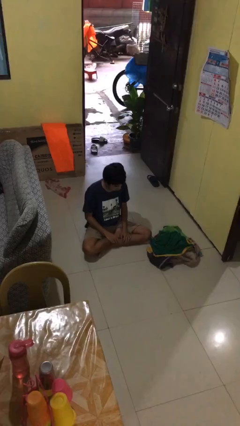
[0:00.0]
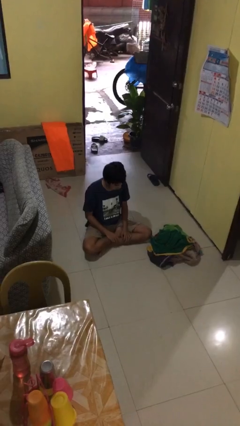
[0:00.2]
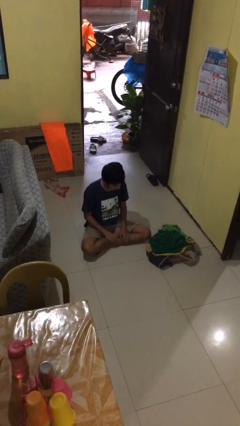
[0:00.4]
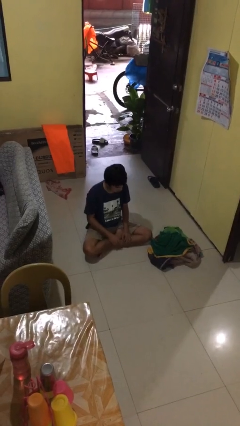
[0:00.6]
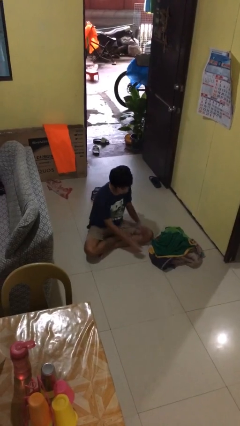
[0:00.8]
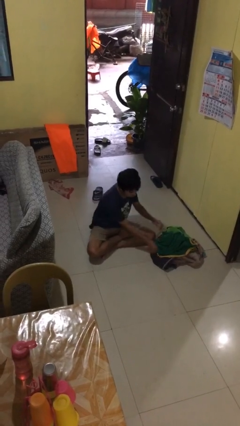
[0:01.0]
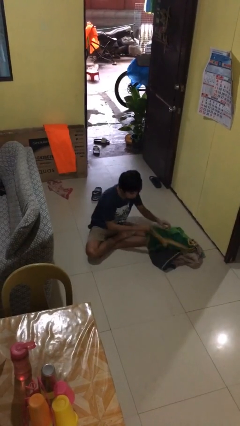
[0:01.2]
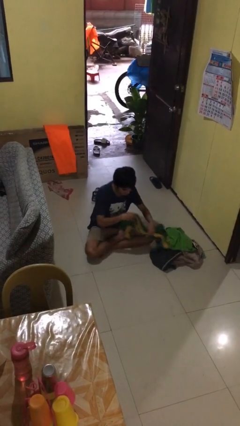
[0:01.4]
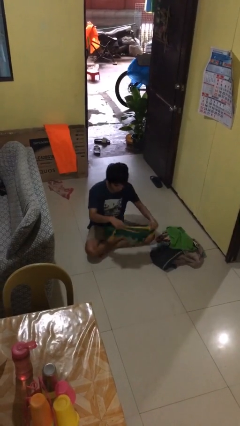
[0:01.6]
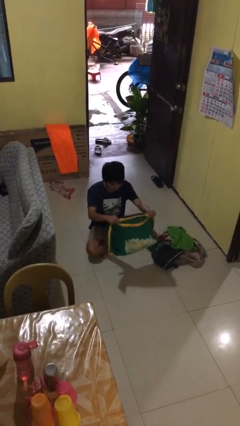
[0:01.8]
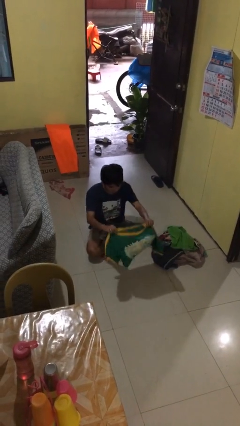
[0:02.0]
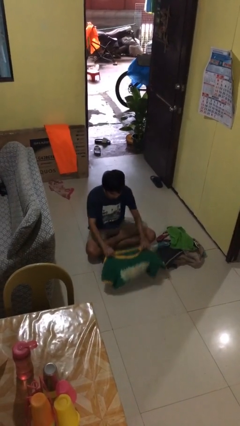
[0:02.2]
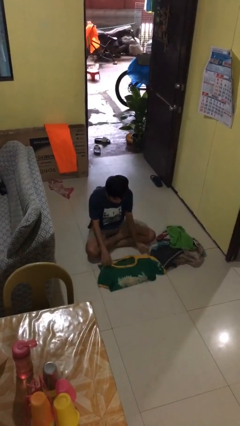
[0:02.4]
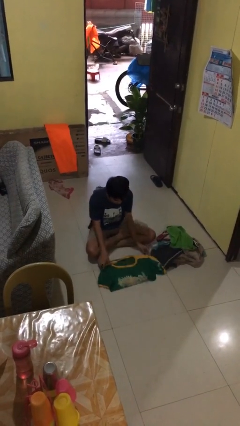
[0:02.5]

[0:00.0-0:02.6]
person folds shirt

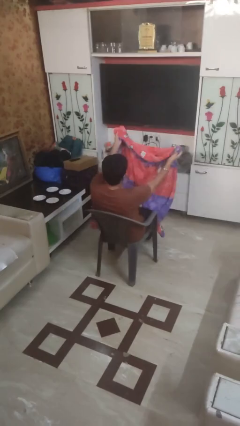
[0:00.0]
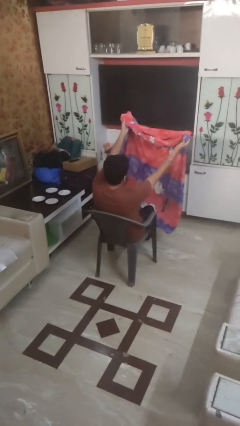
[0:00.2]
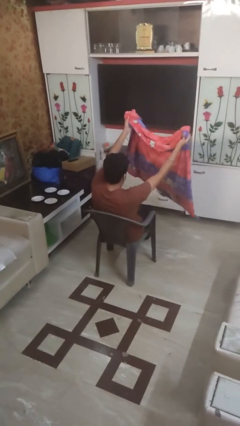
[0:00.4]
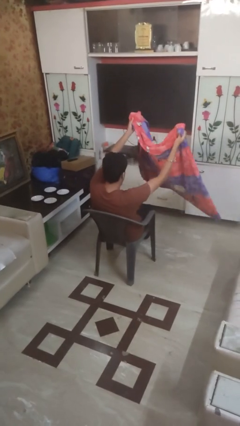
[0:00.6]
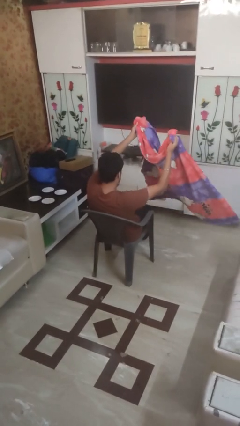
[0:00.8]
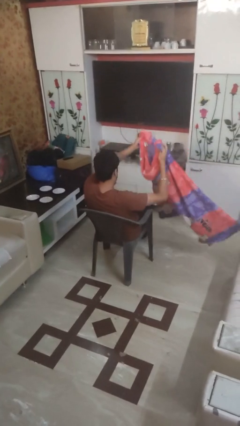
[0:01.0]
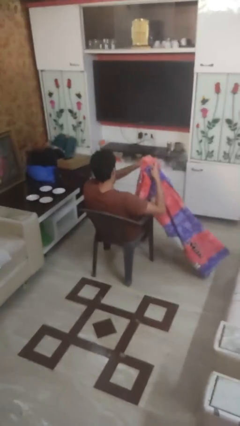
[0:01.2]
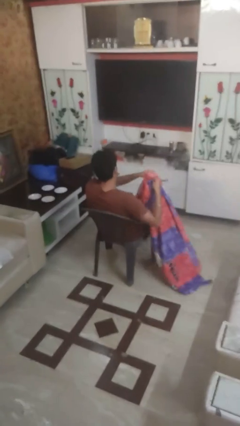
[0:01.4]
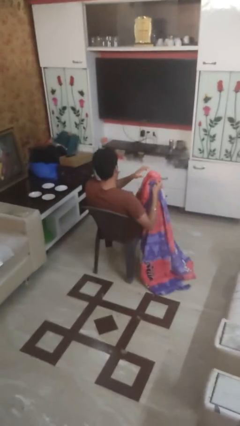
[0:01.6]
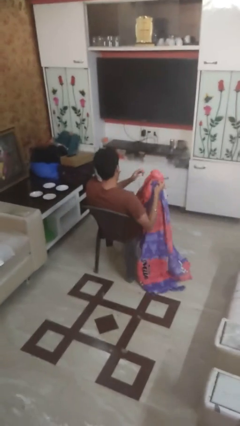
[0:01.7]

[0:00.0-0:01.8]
person uncovers with blanket

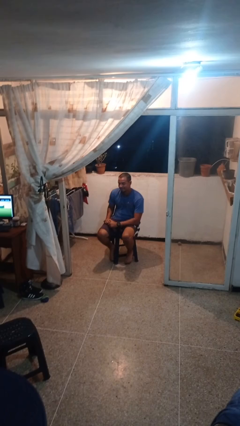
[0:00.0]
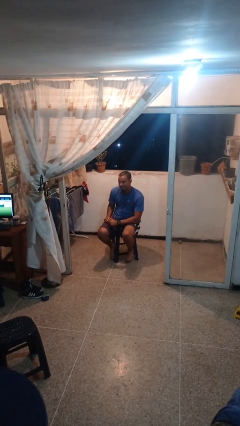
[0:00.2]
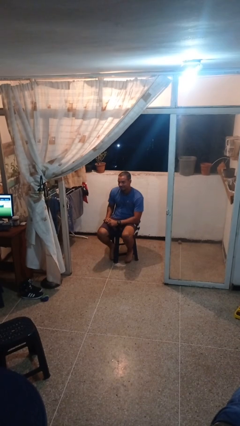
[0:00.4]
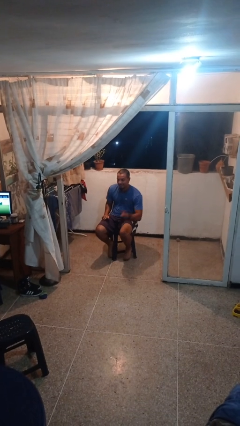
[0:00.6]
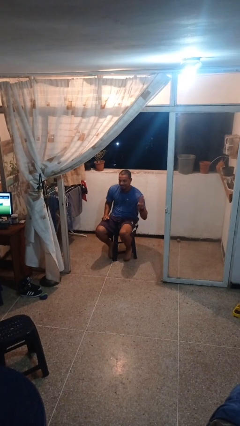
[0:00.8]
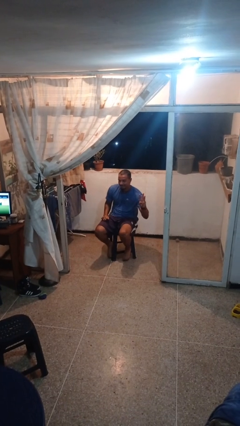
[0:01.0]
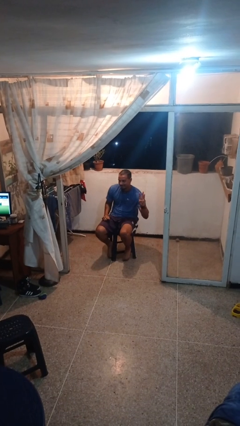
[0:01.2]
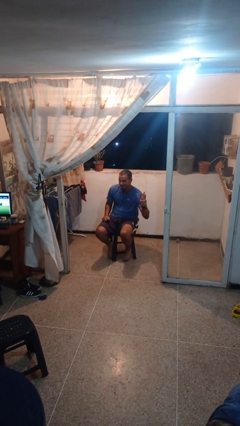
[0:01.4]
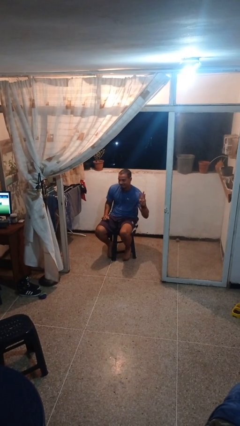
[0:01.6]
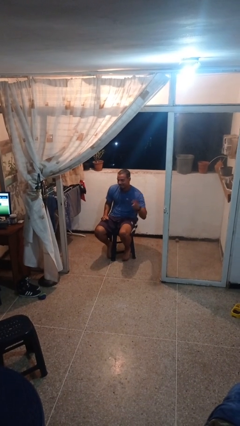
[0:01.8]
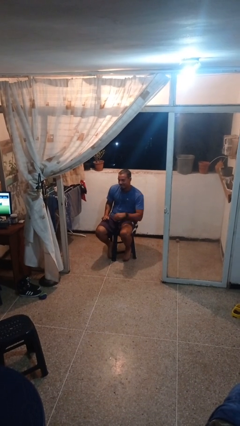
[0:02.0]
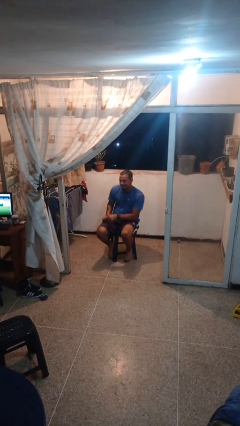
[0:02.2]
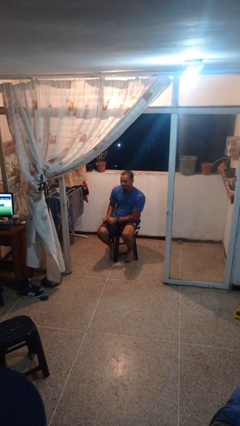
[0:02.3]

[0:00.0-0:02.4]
person gestures number three

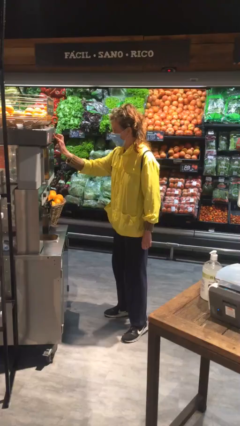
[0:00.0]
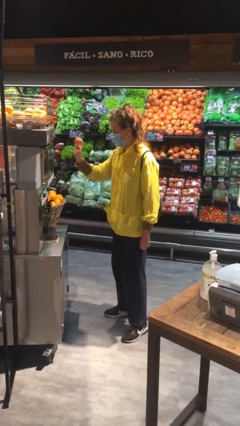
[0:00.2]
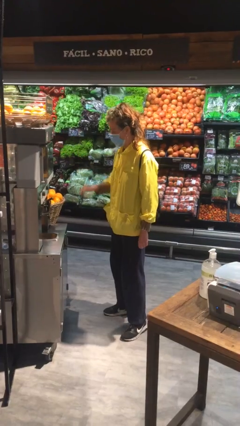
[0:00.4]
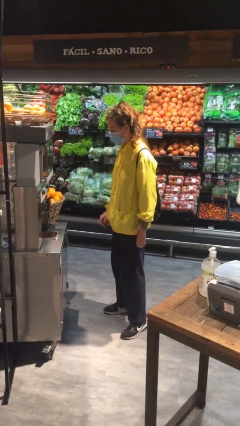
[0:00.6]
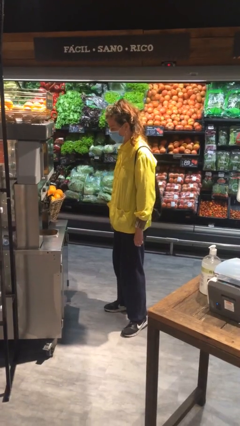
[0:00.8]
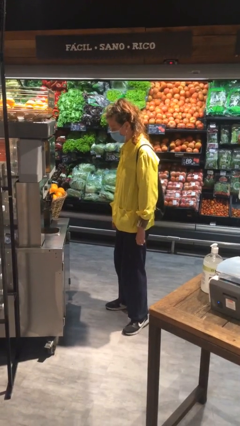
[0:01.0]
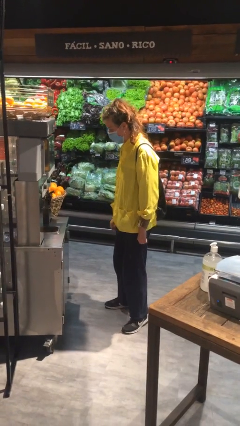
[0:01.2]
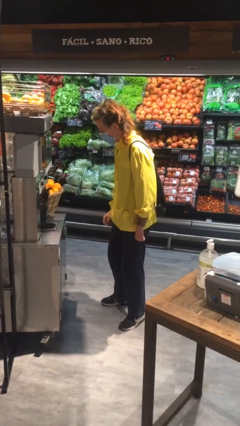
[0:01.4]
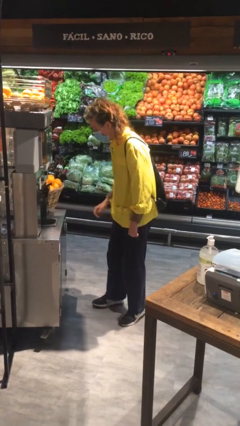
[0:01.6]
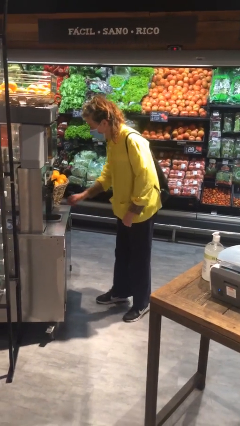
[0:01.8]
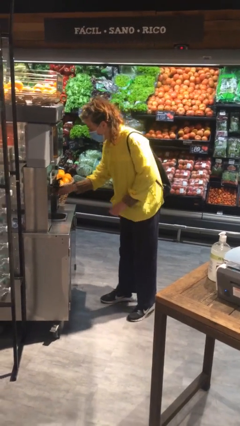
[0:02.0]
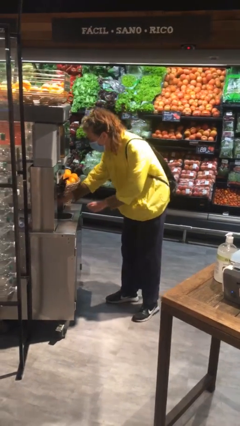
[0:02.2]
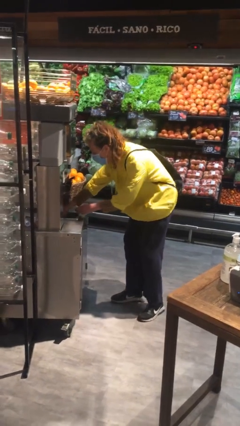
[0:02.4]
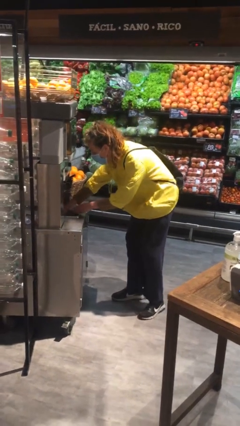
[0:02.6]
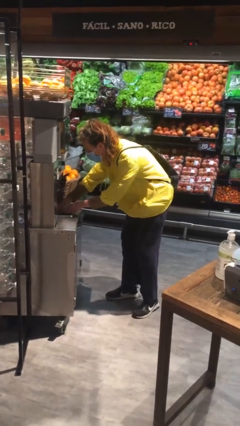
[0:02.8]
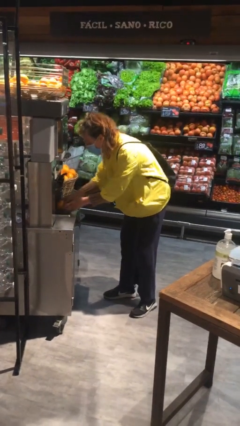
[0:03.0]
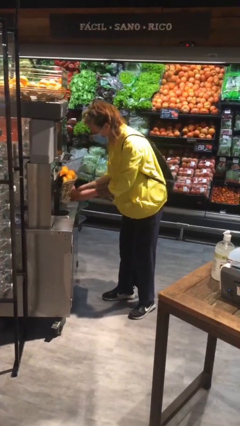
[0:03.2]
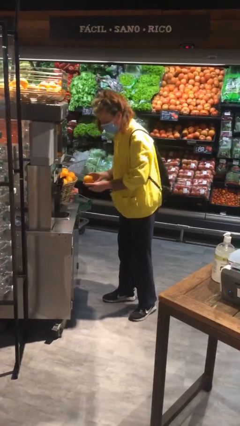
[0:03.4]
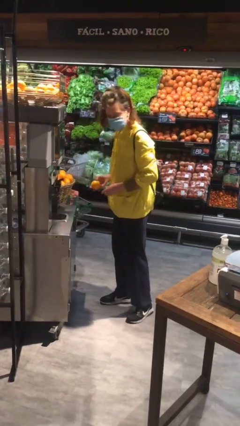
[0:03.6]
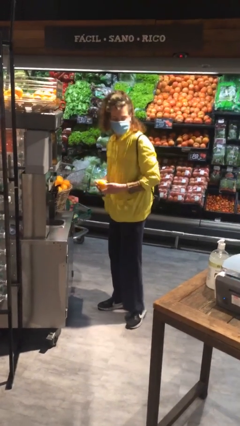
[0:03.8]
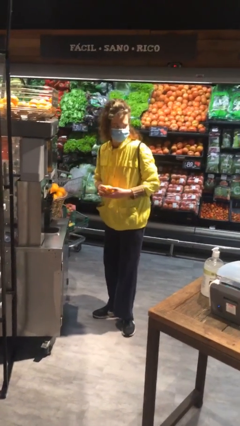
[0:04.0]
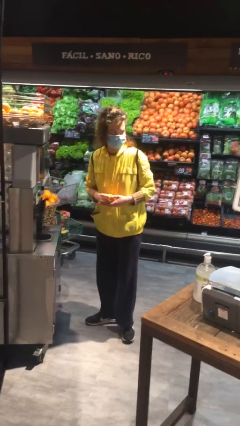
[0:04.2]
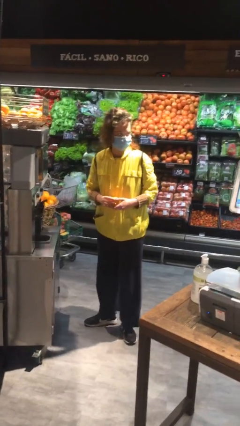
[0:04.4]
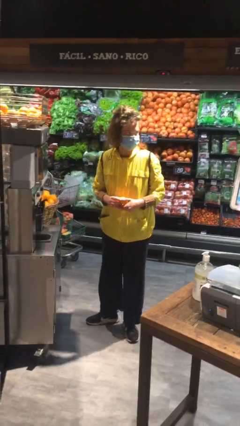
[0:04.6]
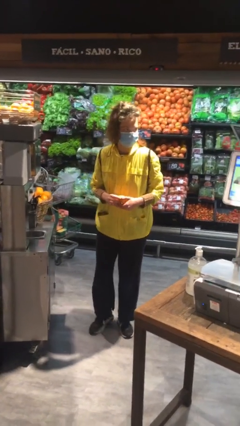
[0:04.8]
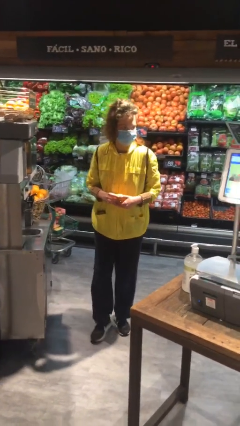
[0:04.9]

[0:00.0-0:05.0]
person purchases from machine

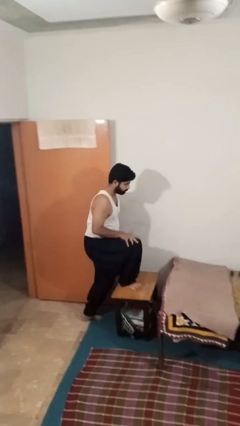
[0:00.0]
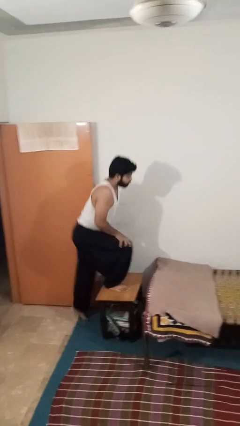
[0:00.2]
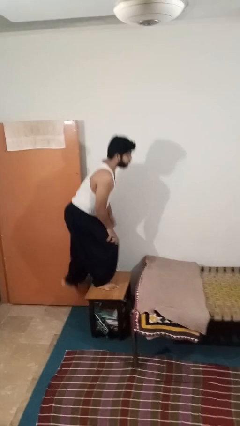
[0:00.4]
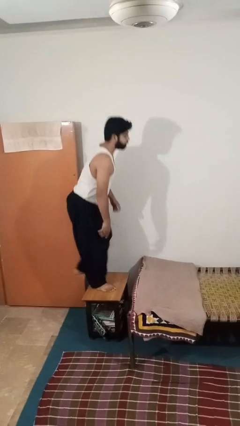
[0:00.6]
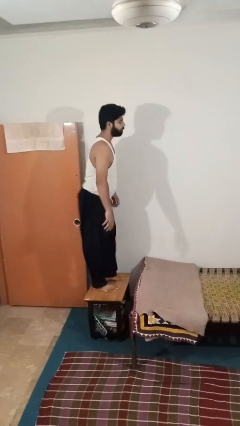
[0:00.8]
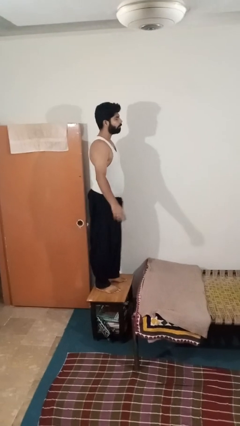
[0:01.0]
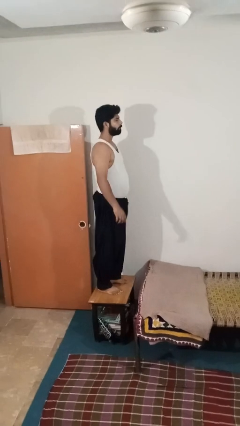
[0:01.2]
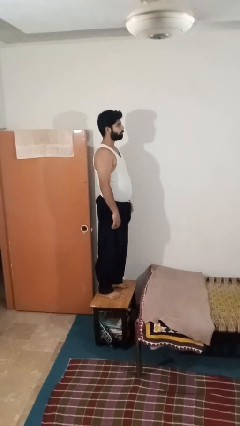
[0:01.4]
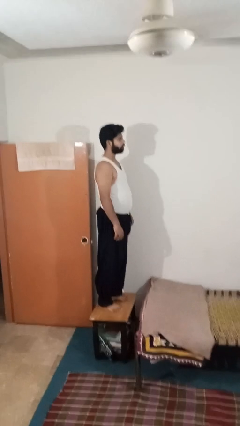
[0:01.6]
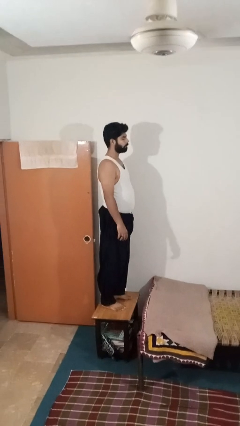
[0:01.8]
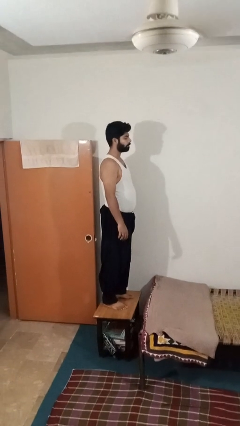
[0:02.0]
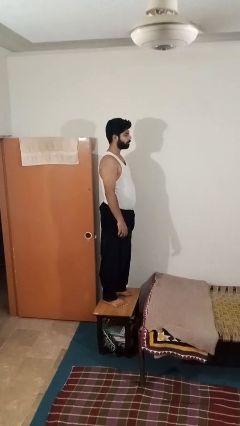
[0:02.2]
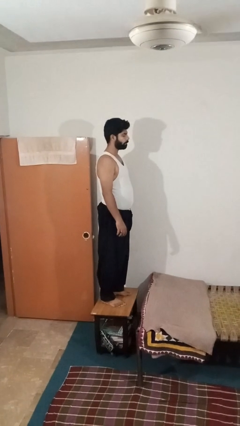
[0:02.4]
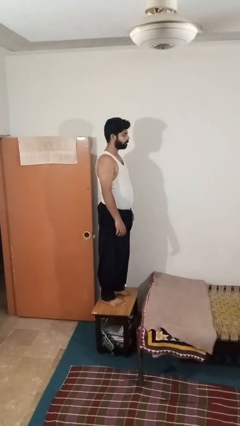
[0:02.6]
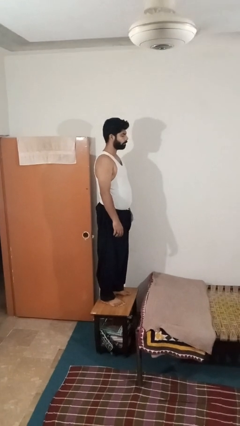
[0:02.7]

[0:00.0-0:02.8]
person climbs on table

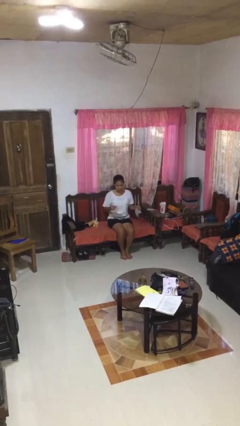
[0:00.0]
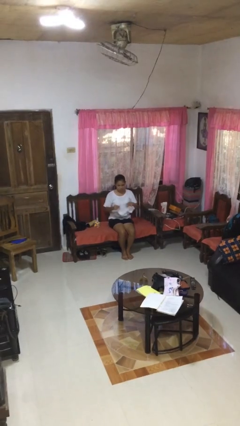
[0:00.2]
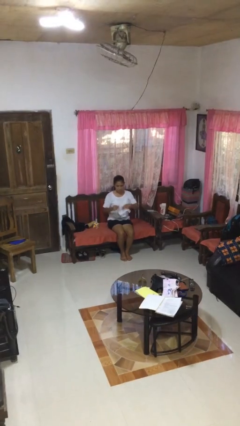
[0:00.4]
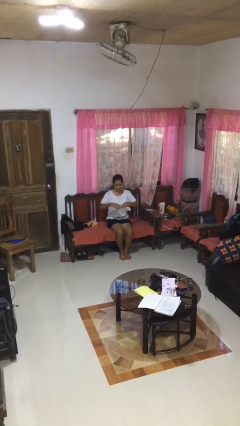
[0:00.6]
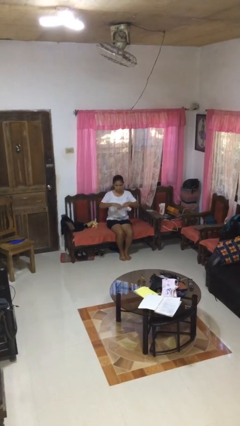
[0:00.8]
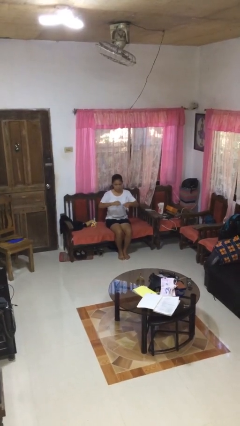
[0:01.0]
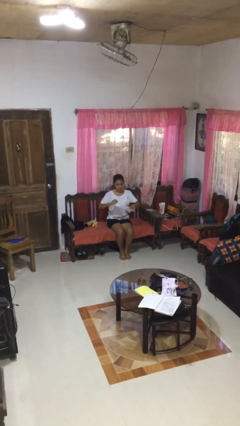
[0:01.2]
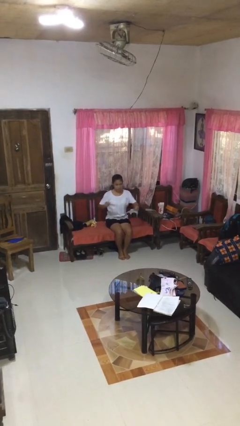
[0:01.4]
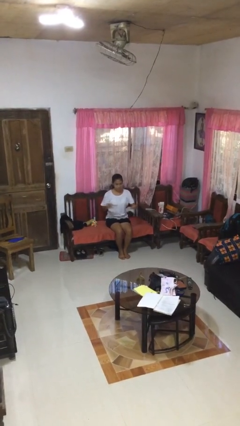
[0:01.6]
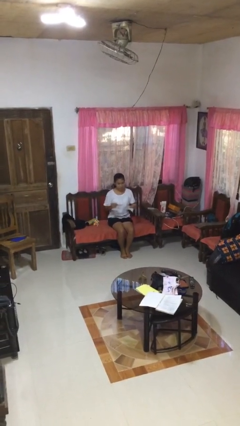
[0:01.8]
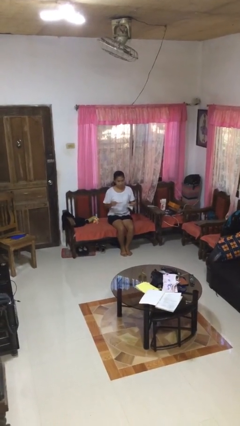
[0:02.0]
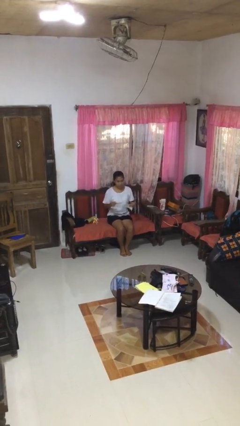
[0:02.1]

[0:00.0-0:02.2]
person tears paper

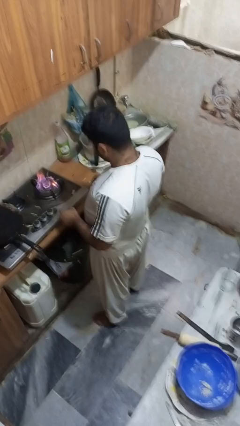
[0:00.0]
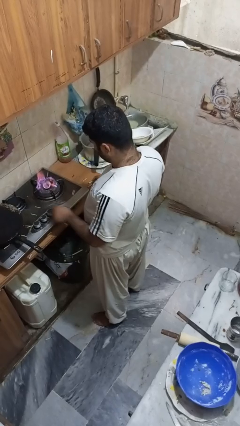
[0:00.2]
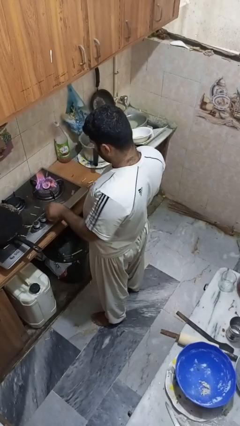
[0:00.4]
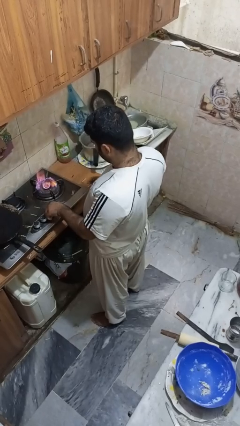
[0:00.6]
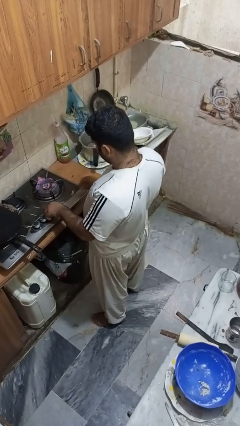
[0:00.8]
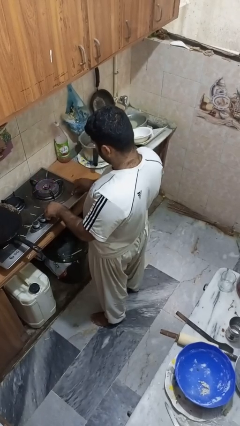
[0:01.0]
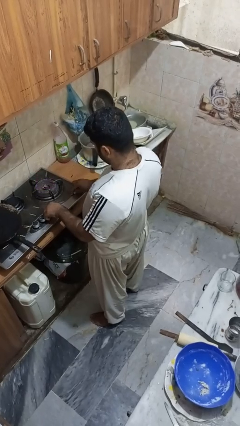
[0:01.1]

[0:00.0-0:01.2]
person turns off stovetop
